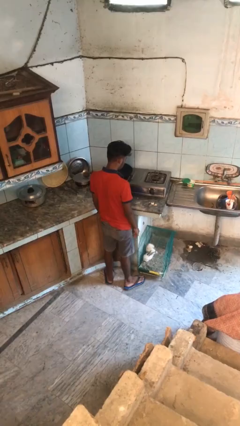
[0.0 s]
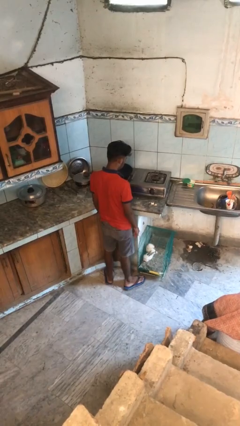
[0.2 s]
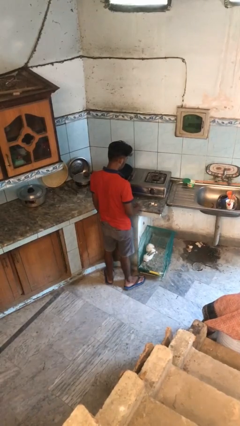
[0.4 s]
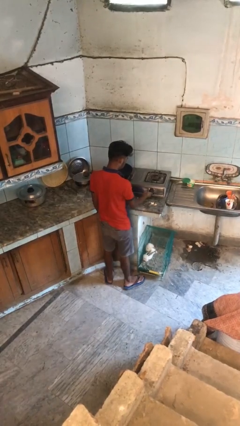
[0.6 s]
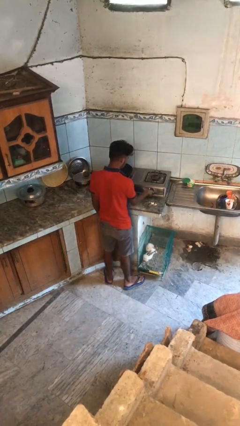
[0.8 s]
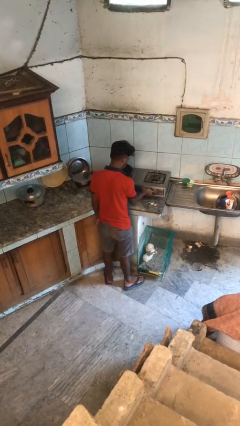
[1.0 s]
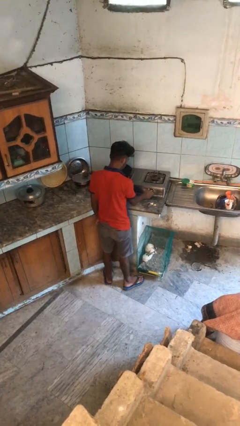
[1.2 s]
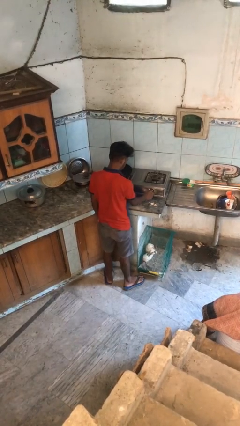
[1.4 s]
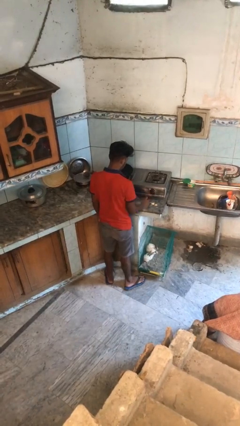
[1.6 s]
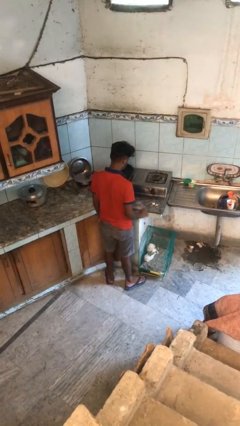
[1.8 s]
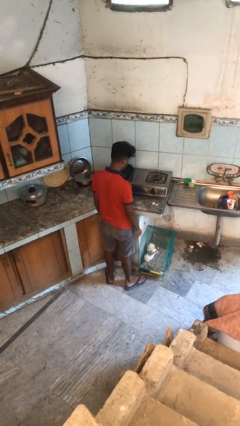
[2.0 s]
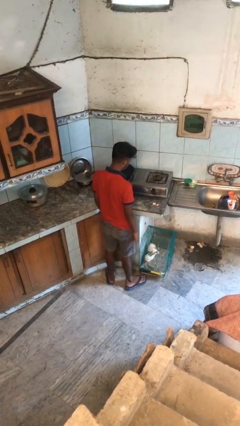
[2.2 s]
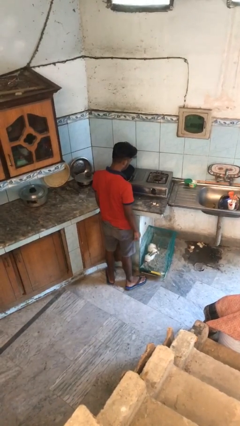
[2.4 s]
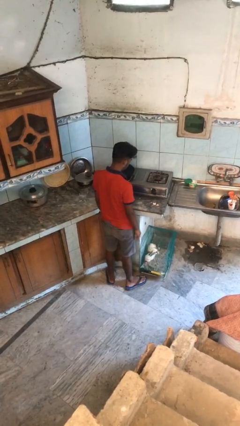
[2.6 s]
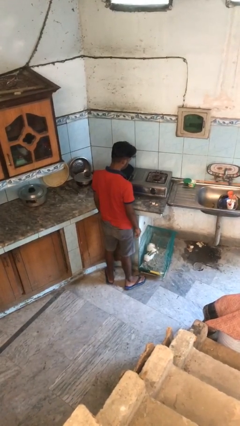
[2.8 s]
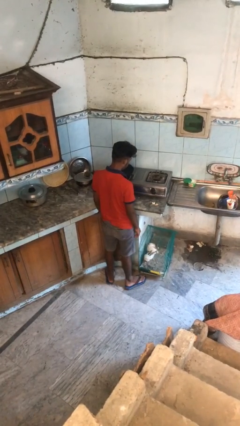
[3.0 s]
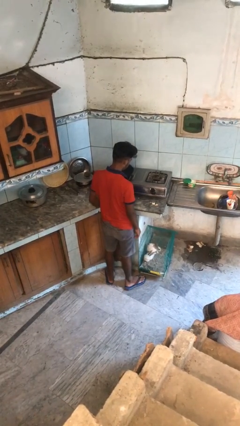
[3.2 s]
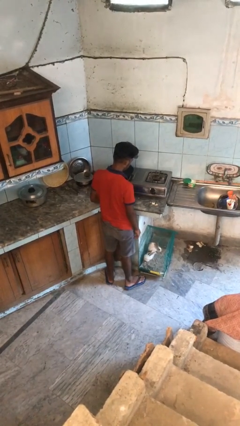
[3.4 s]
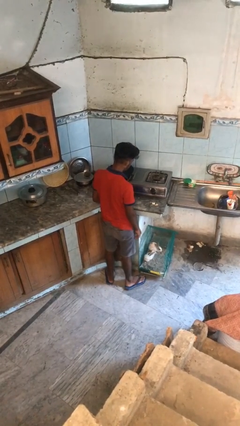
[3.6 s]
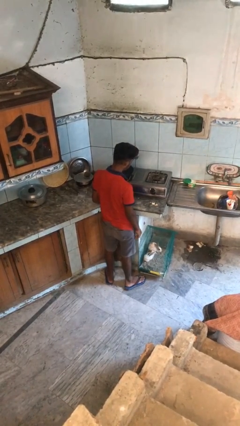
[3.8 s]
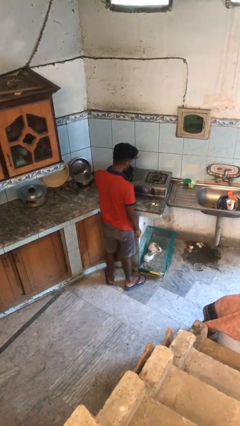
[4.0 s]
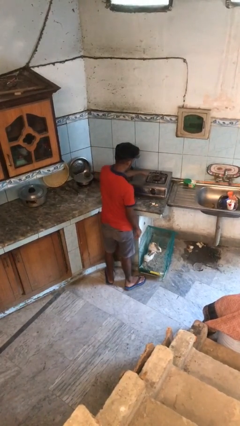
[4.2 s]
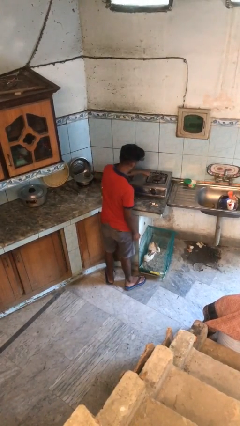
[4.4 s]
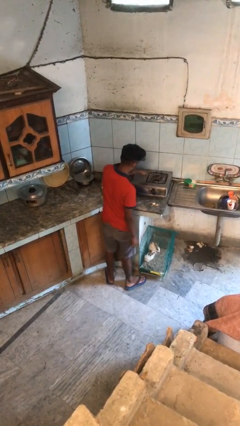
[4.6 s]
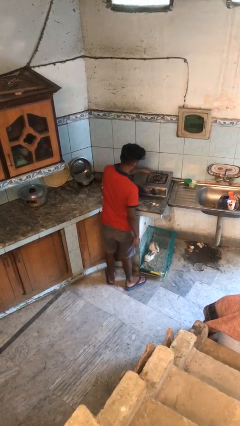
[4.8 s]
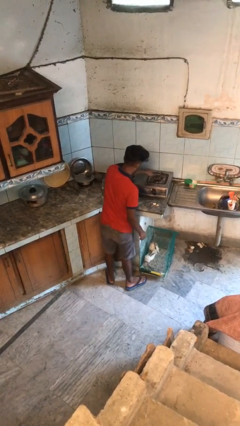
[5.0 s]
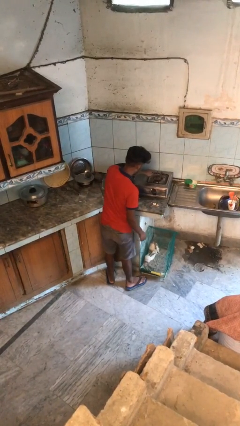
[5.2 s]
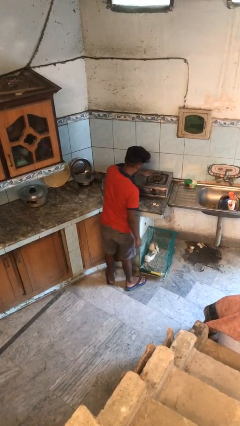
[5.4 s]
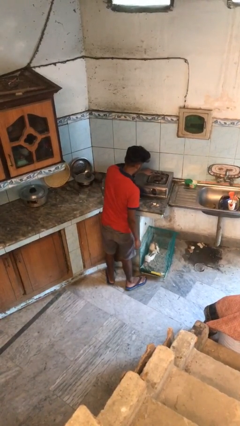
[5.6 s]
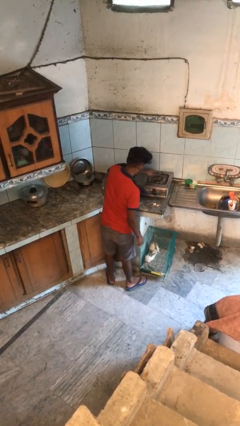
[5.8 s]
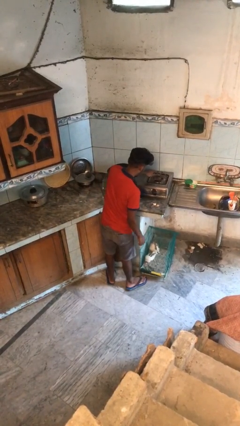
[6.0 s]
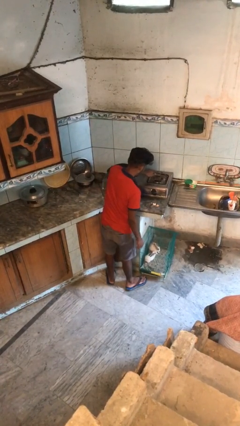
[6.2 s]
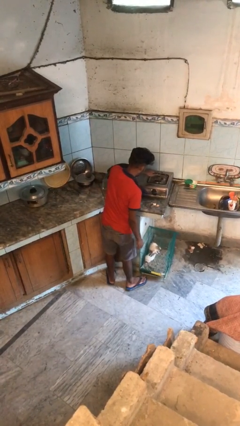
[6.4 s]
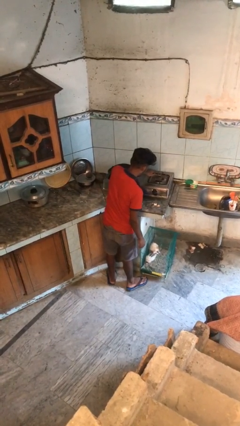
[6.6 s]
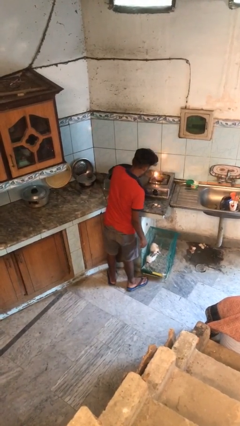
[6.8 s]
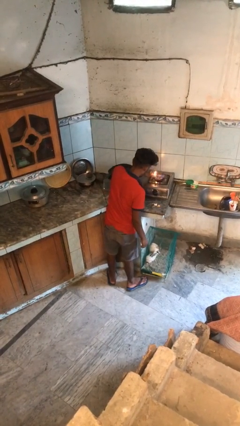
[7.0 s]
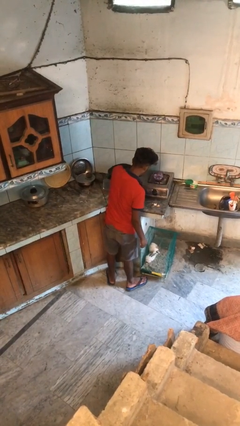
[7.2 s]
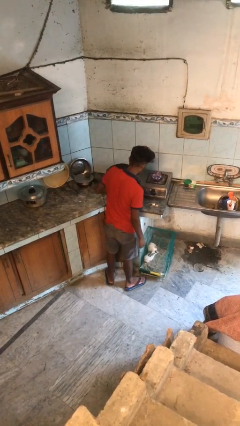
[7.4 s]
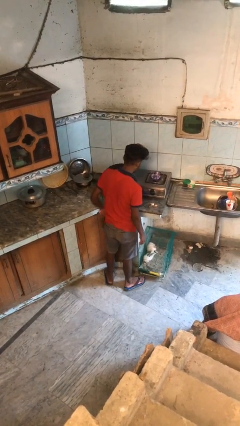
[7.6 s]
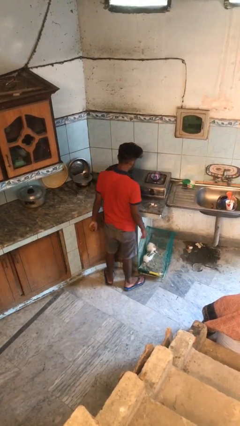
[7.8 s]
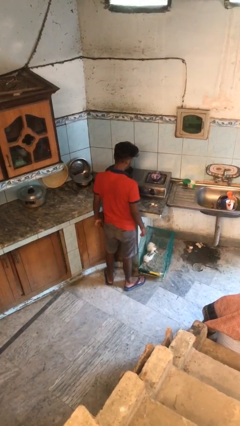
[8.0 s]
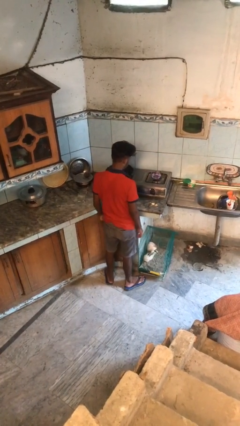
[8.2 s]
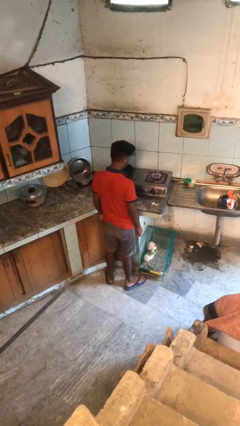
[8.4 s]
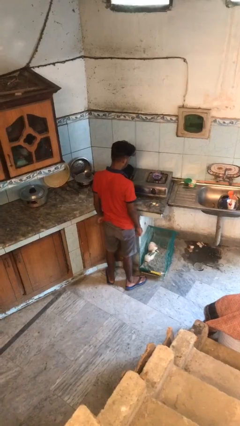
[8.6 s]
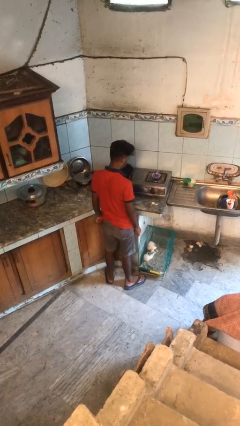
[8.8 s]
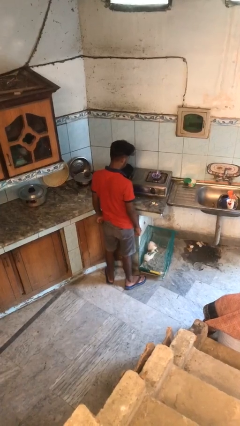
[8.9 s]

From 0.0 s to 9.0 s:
person turns on stovetop

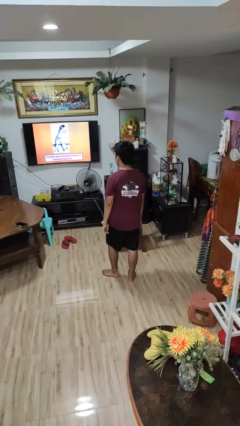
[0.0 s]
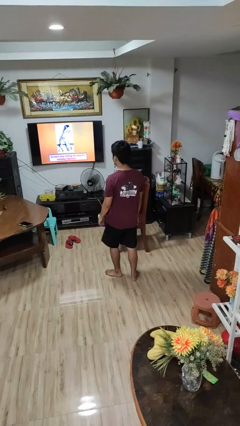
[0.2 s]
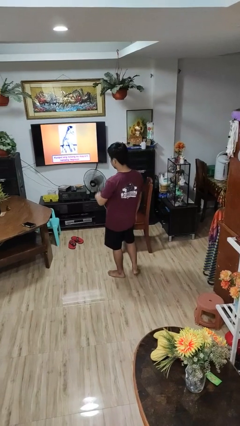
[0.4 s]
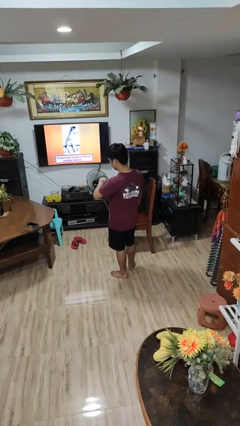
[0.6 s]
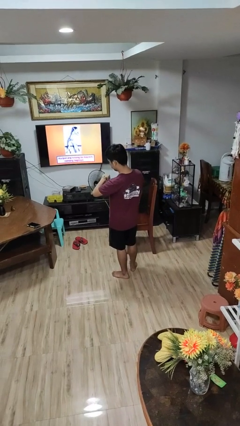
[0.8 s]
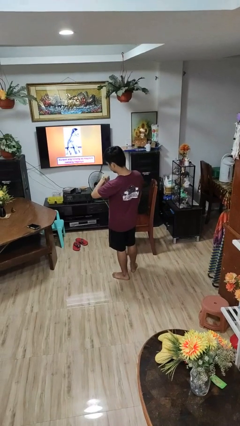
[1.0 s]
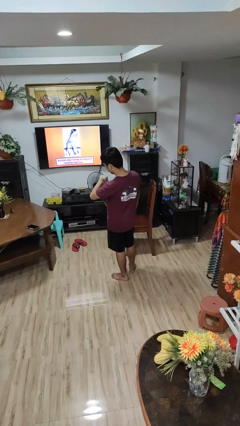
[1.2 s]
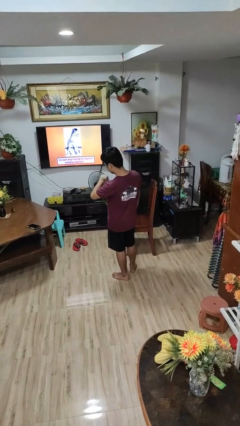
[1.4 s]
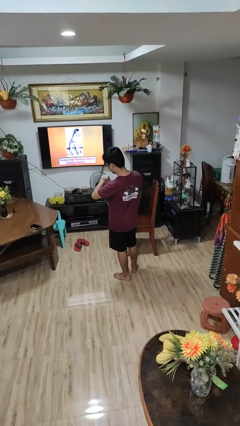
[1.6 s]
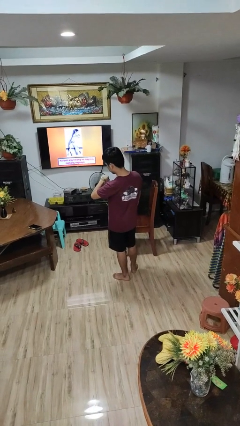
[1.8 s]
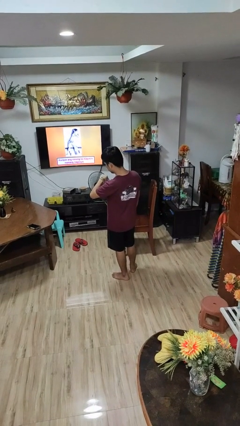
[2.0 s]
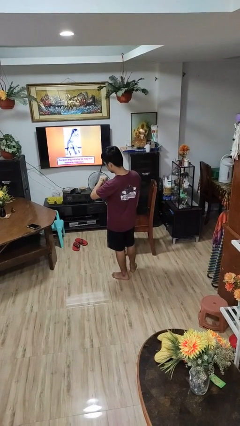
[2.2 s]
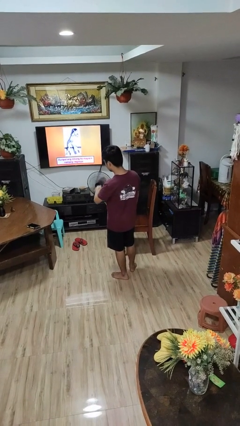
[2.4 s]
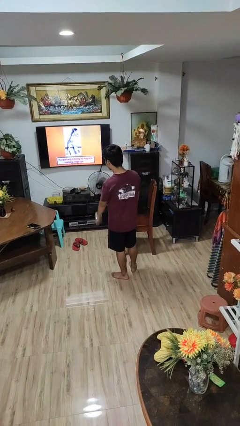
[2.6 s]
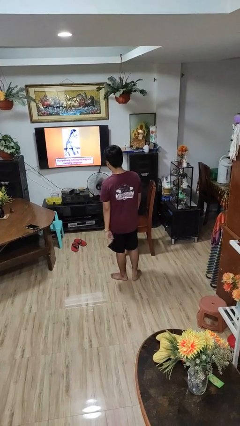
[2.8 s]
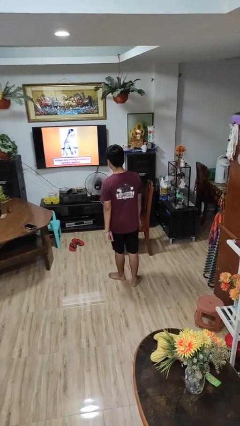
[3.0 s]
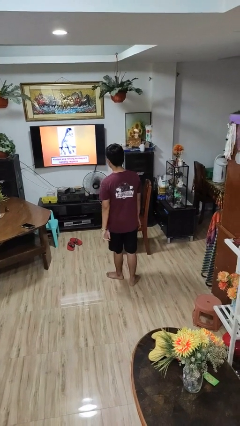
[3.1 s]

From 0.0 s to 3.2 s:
person looks at wristwatch

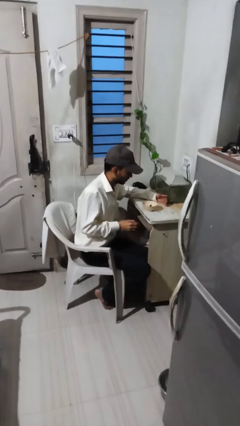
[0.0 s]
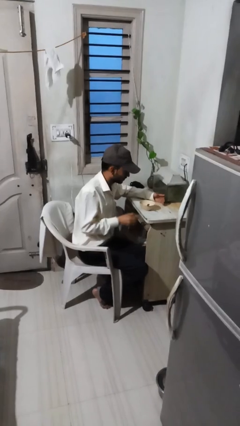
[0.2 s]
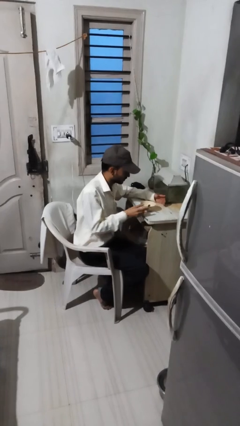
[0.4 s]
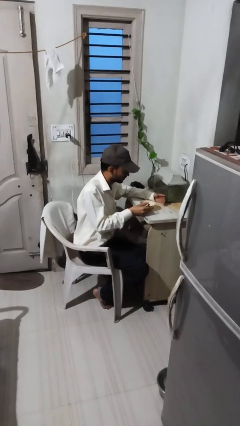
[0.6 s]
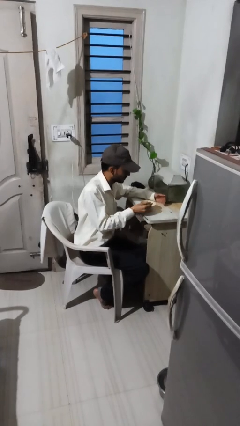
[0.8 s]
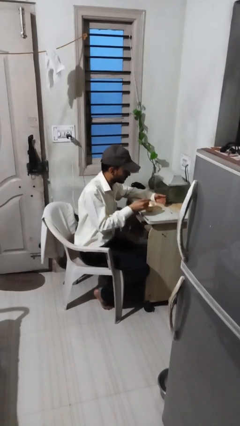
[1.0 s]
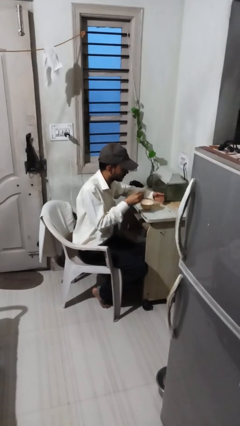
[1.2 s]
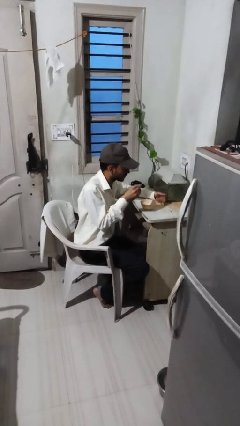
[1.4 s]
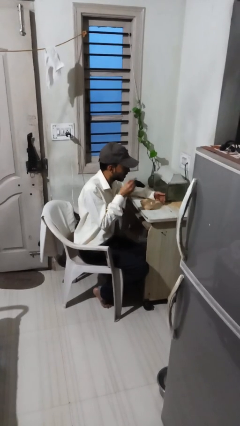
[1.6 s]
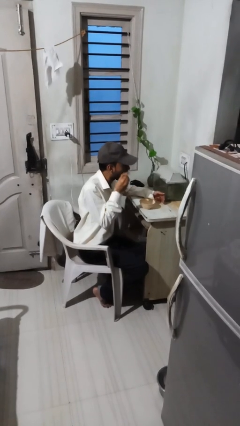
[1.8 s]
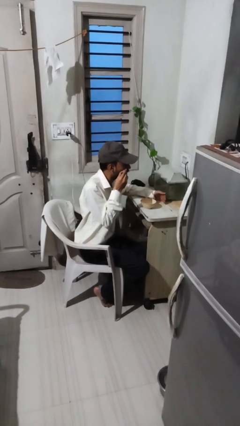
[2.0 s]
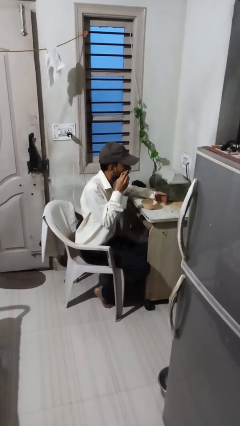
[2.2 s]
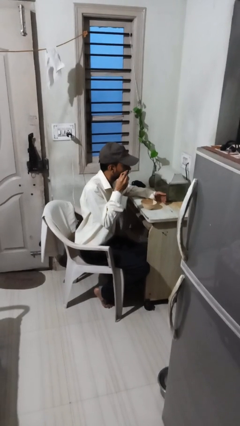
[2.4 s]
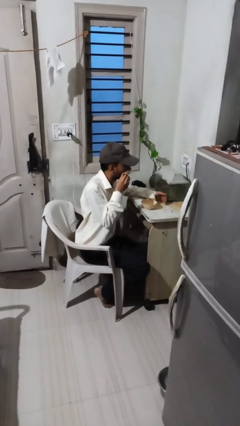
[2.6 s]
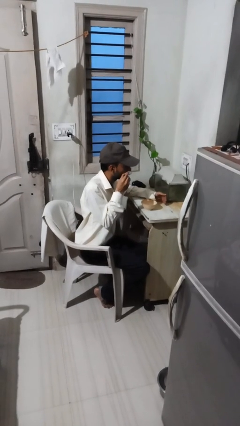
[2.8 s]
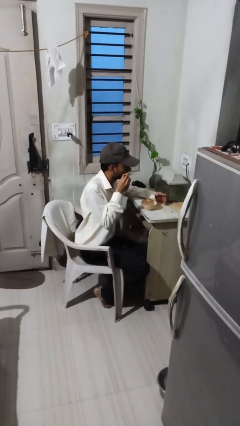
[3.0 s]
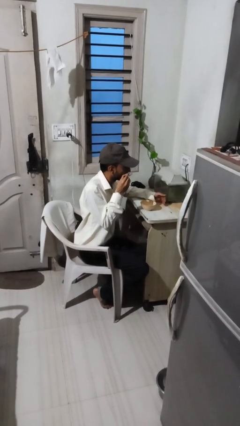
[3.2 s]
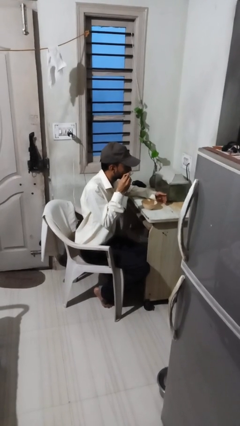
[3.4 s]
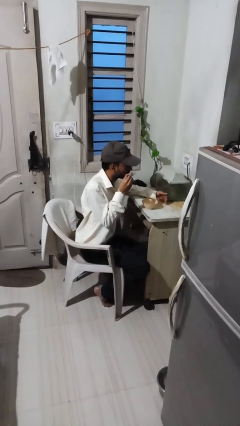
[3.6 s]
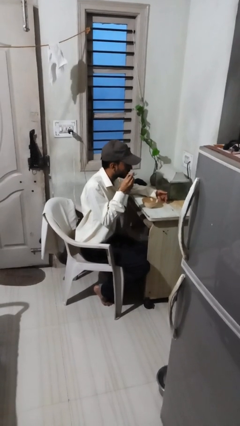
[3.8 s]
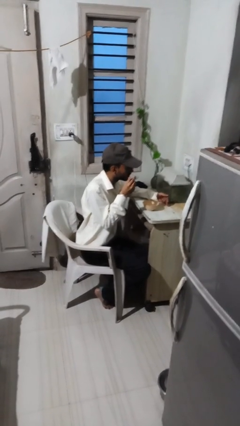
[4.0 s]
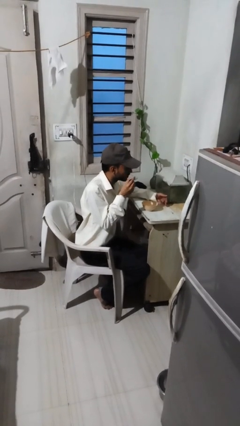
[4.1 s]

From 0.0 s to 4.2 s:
person eats with utensil

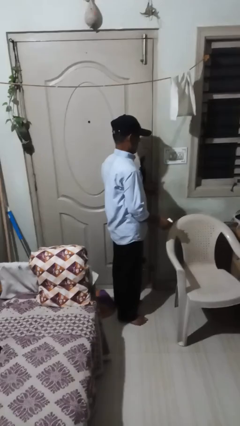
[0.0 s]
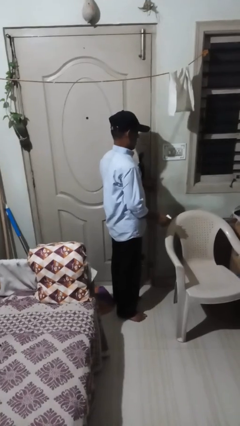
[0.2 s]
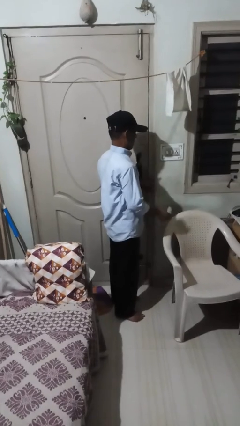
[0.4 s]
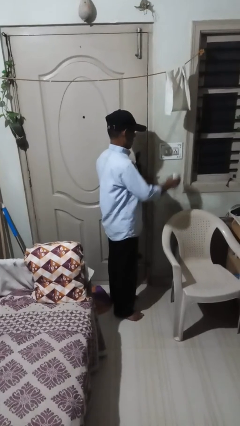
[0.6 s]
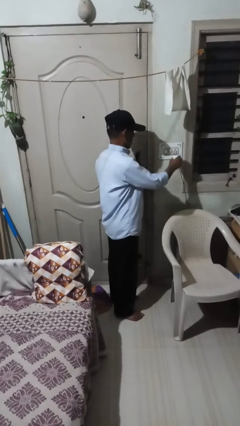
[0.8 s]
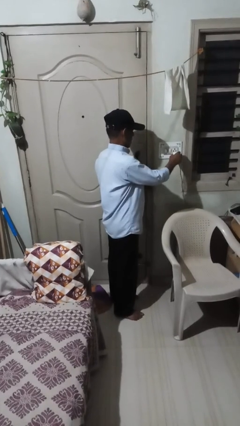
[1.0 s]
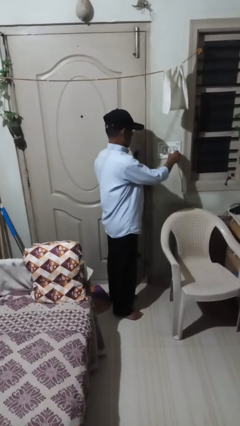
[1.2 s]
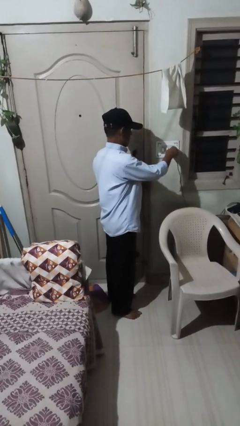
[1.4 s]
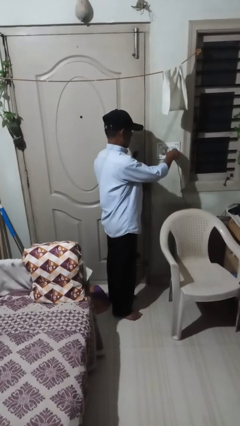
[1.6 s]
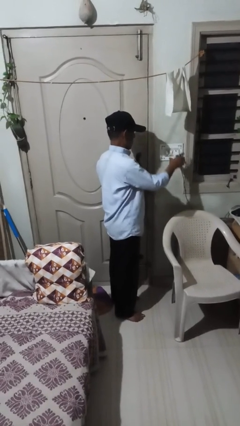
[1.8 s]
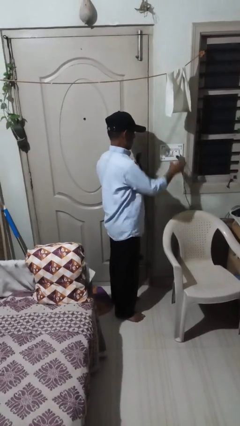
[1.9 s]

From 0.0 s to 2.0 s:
person plugs into electrical socket
